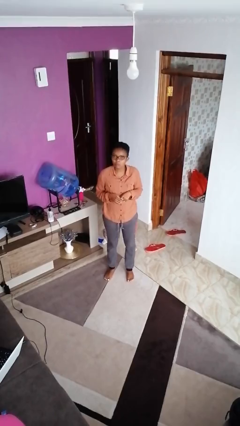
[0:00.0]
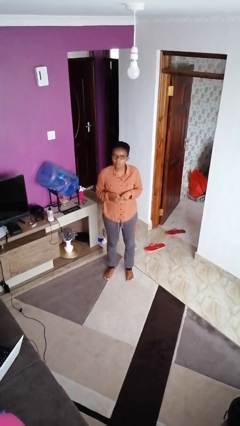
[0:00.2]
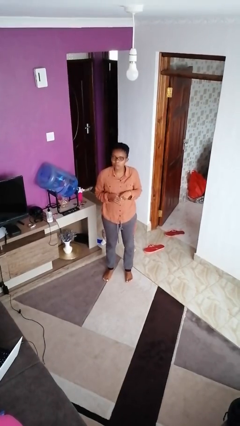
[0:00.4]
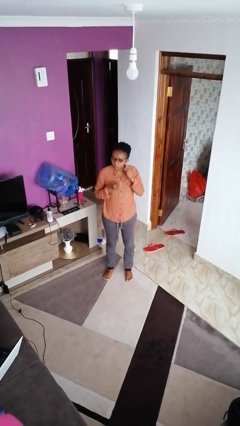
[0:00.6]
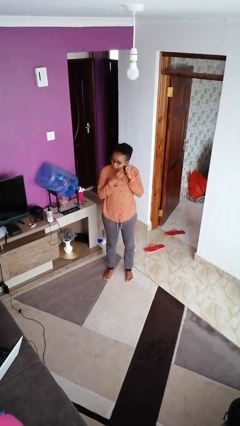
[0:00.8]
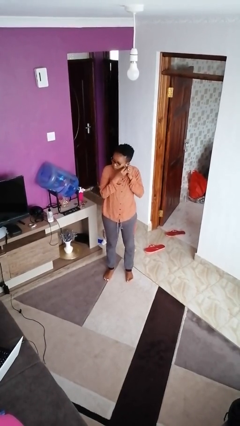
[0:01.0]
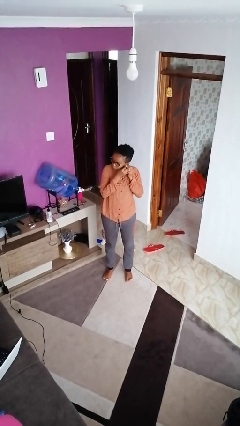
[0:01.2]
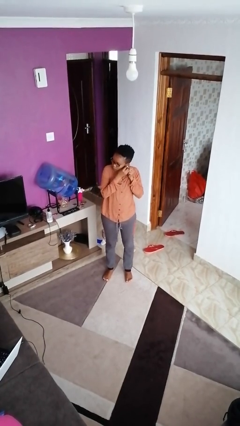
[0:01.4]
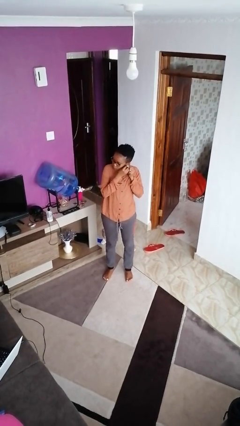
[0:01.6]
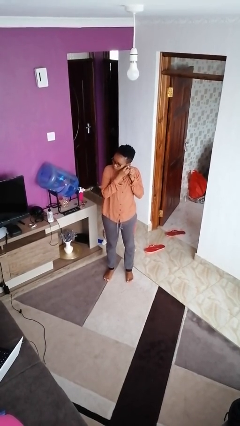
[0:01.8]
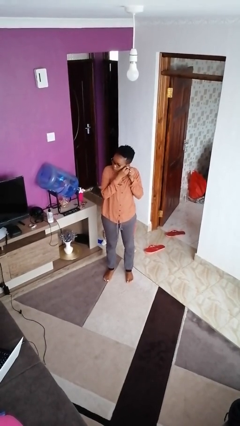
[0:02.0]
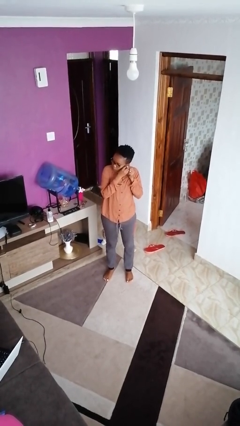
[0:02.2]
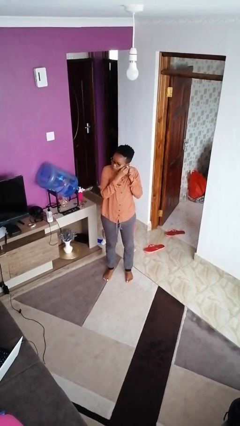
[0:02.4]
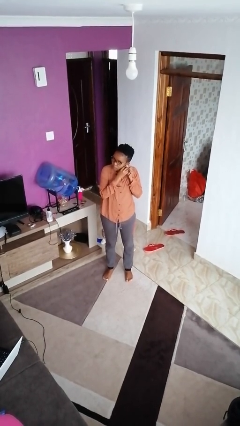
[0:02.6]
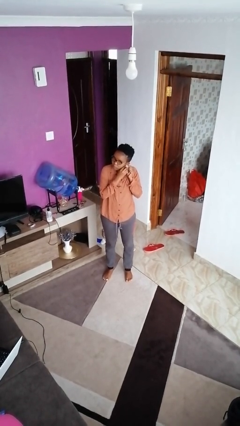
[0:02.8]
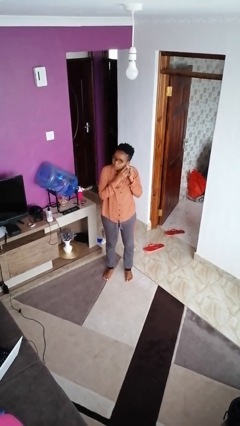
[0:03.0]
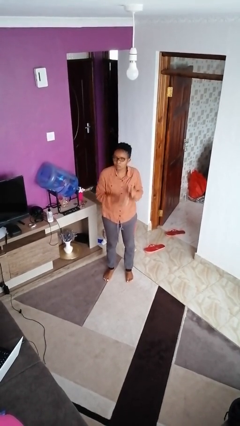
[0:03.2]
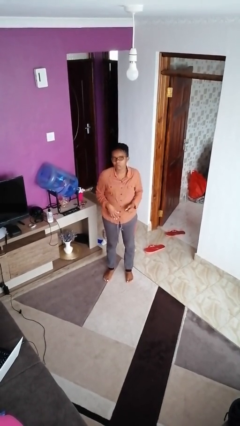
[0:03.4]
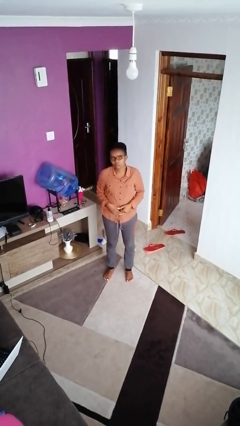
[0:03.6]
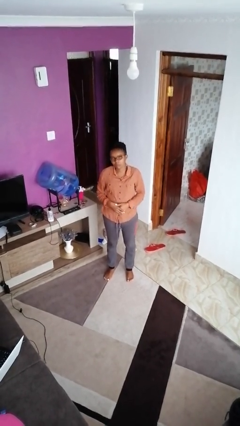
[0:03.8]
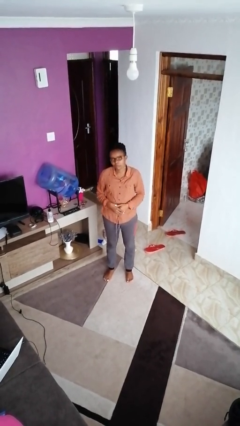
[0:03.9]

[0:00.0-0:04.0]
person puts on earrings

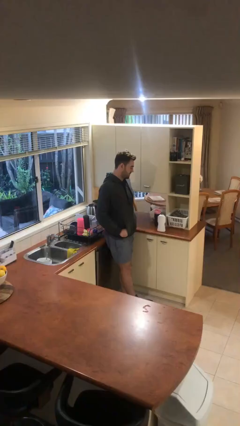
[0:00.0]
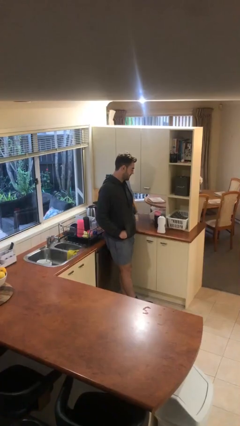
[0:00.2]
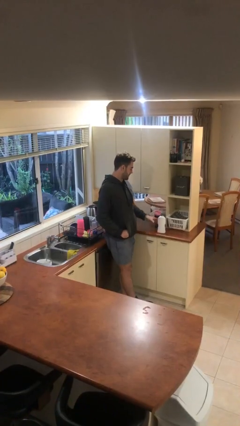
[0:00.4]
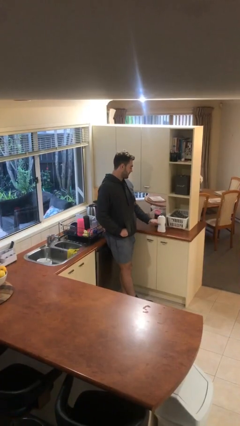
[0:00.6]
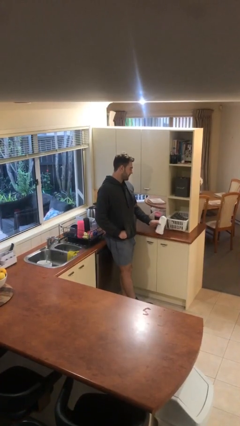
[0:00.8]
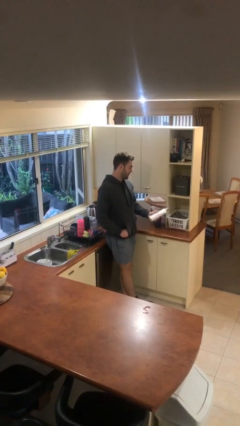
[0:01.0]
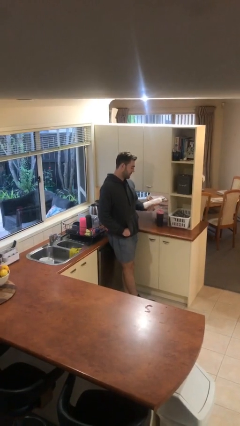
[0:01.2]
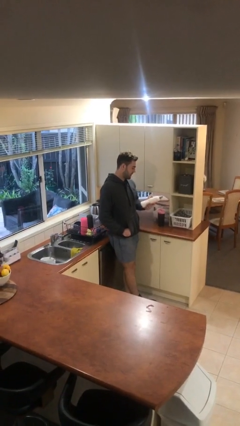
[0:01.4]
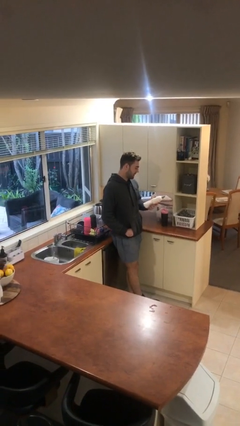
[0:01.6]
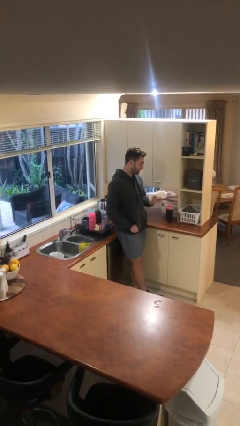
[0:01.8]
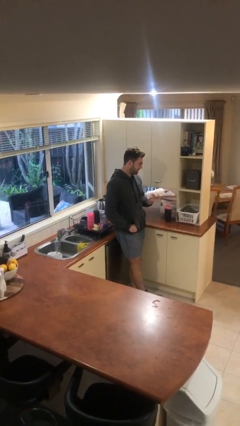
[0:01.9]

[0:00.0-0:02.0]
person picks up object from table

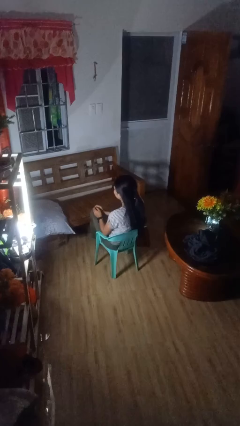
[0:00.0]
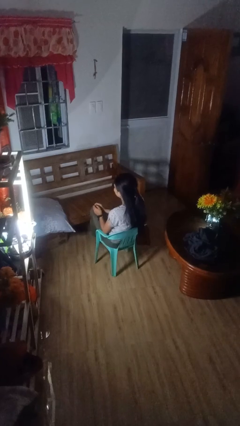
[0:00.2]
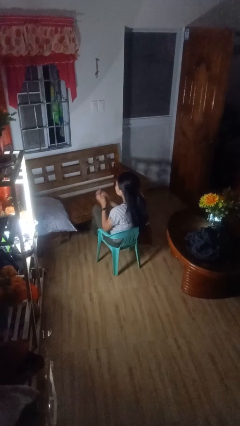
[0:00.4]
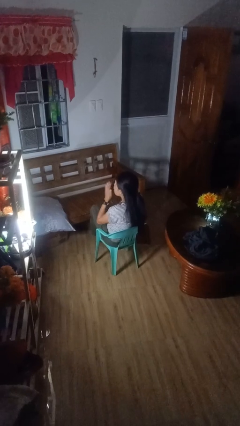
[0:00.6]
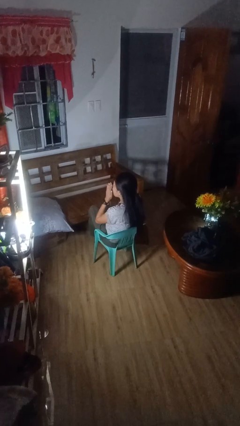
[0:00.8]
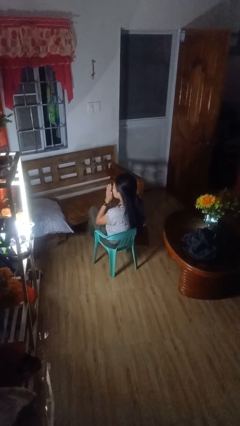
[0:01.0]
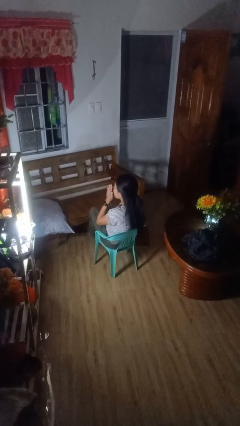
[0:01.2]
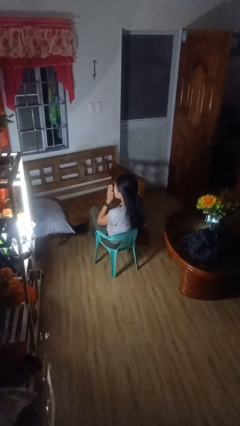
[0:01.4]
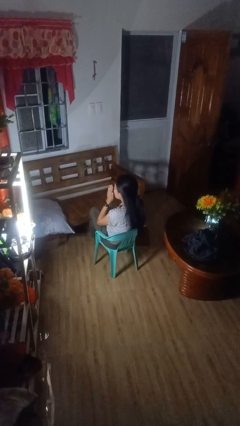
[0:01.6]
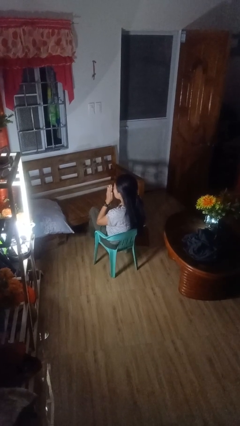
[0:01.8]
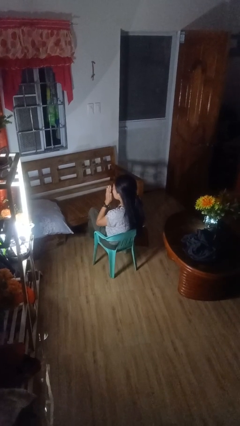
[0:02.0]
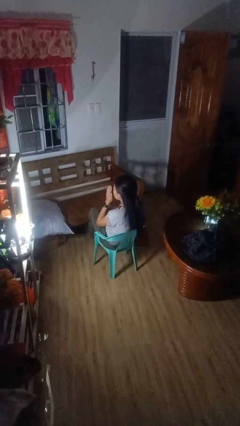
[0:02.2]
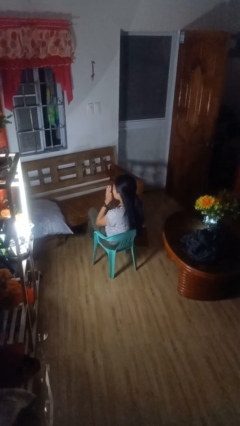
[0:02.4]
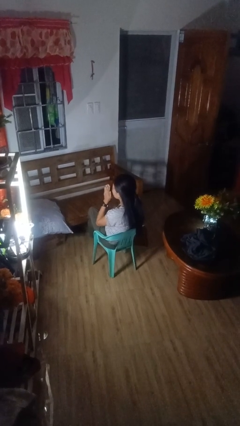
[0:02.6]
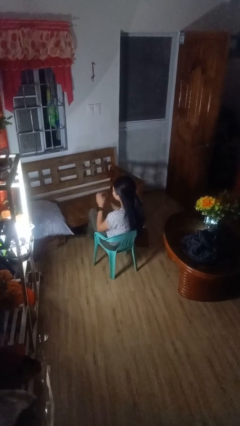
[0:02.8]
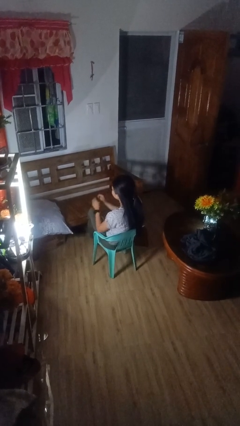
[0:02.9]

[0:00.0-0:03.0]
person blows into hands

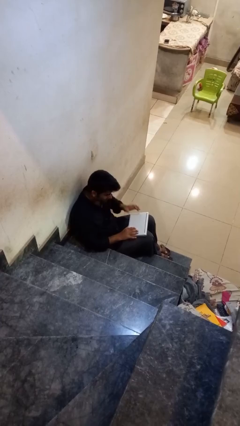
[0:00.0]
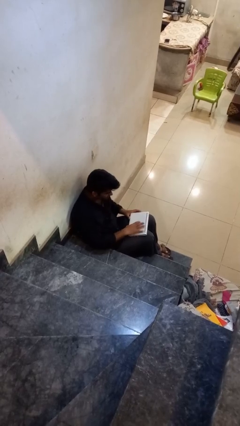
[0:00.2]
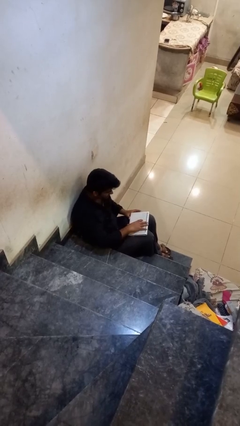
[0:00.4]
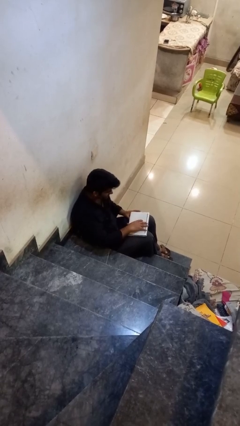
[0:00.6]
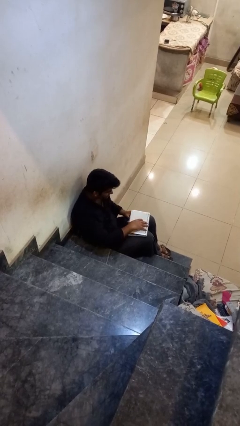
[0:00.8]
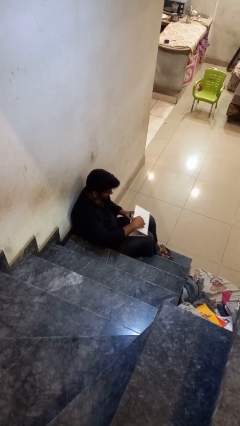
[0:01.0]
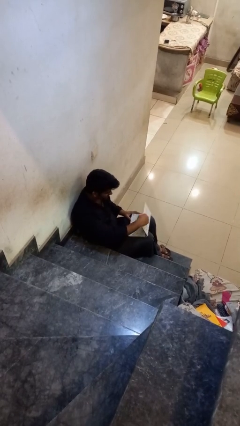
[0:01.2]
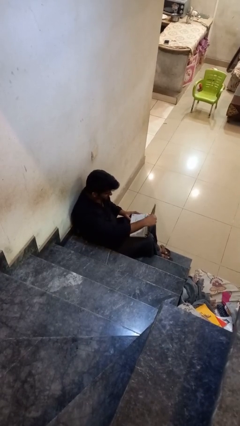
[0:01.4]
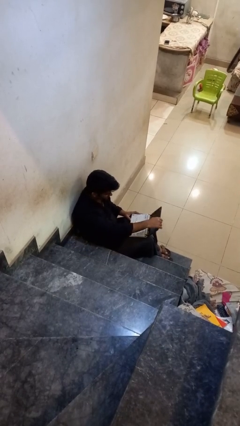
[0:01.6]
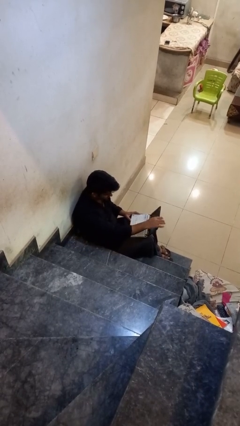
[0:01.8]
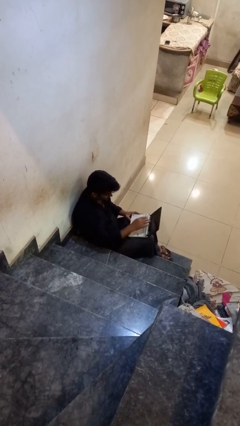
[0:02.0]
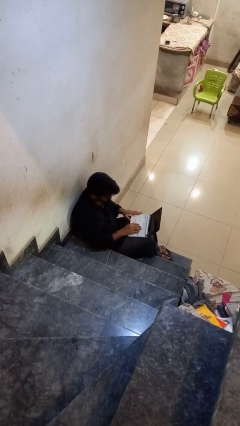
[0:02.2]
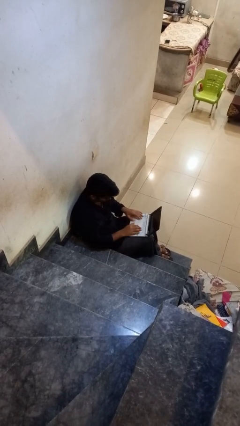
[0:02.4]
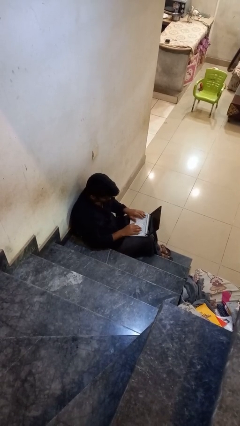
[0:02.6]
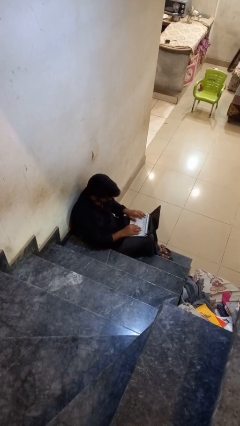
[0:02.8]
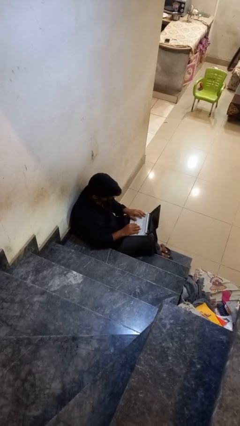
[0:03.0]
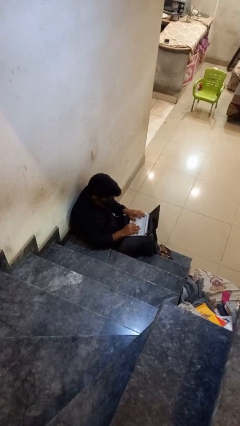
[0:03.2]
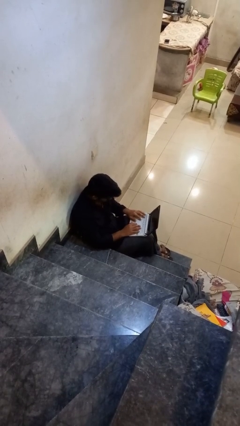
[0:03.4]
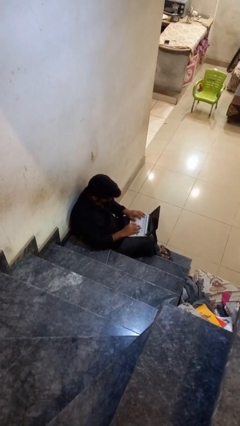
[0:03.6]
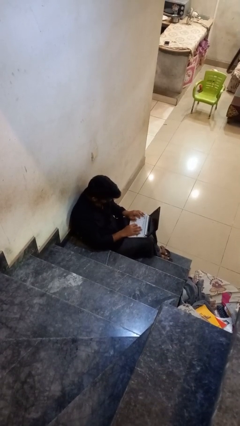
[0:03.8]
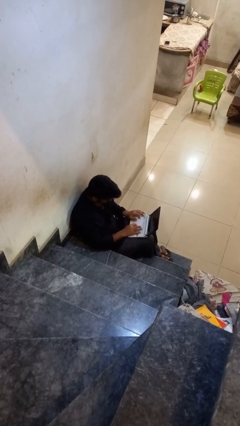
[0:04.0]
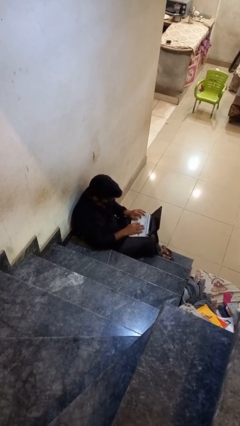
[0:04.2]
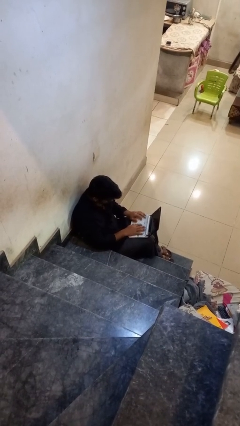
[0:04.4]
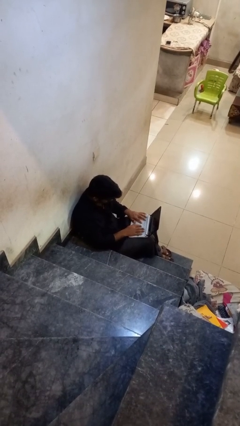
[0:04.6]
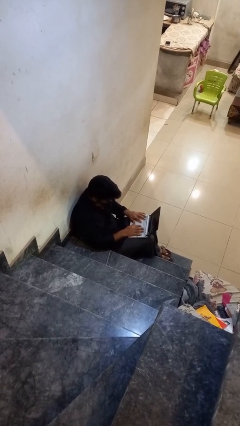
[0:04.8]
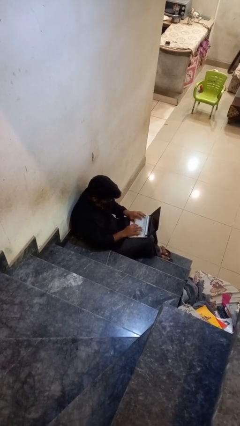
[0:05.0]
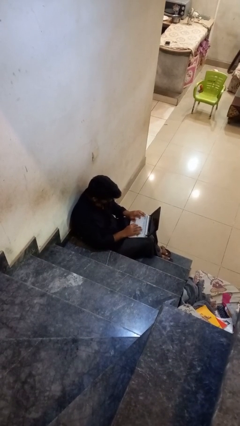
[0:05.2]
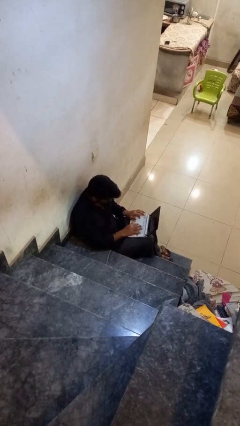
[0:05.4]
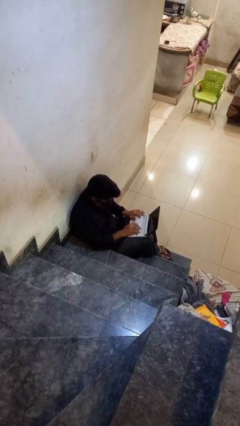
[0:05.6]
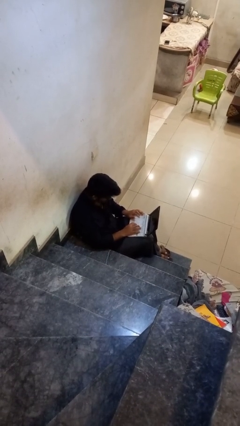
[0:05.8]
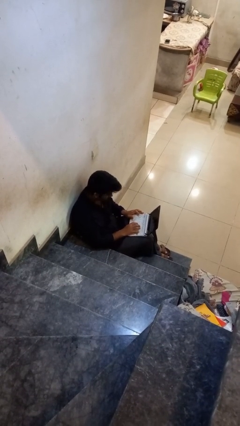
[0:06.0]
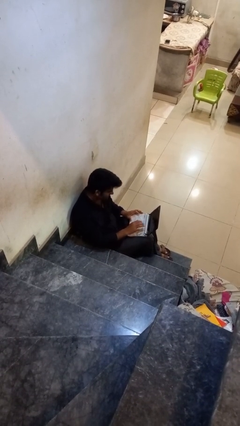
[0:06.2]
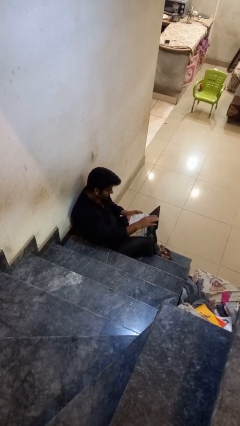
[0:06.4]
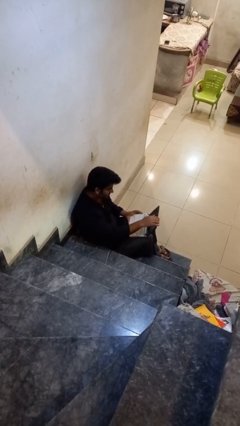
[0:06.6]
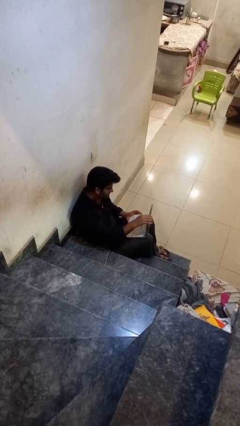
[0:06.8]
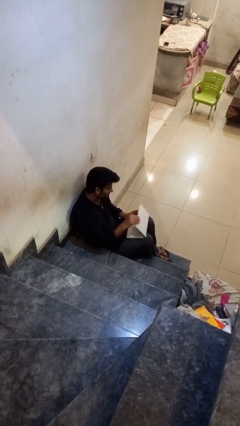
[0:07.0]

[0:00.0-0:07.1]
person interacts with laptop

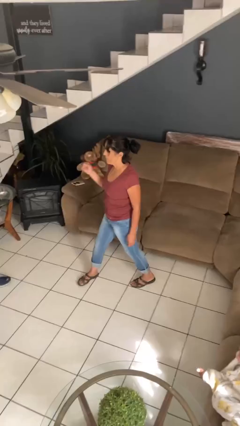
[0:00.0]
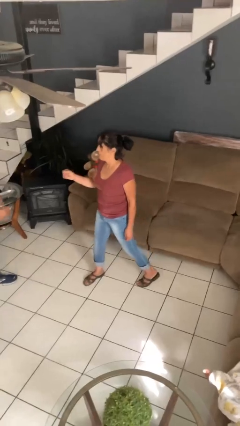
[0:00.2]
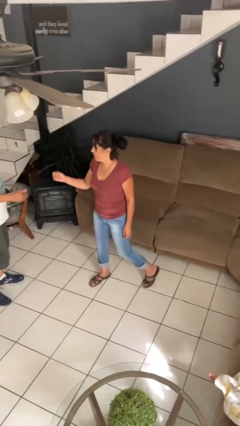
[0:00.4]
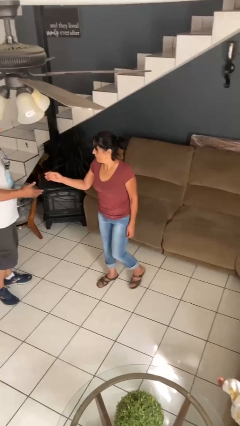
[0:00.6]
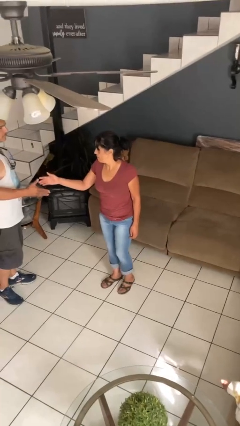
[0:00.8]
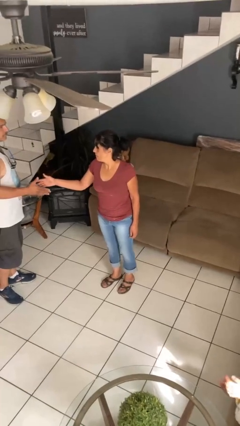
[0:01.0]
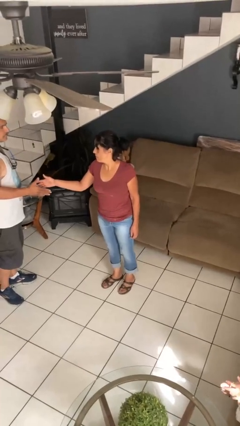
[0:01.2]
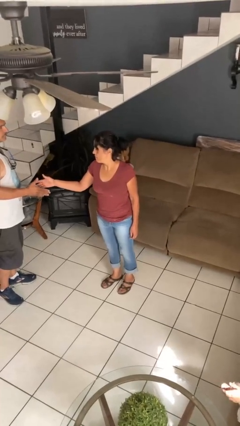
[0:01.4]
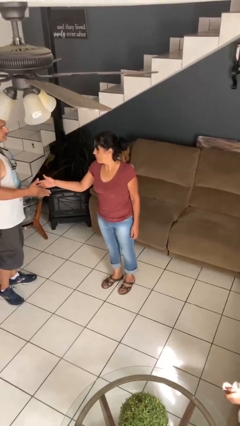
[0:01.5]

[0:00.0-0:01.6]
person waves at person

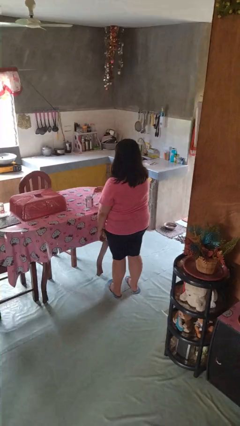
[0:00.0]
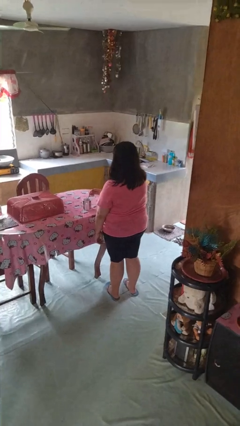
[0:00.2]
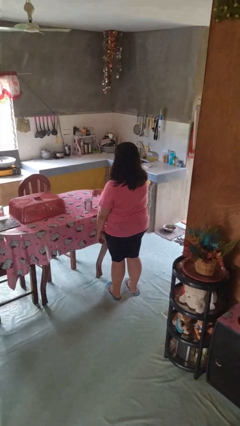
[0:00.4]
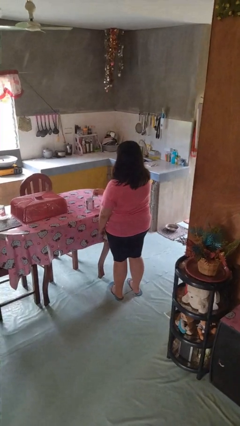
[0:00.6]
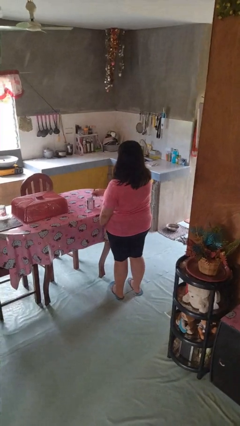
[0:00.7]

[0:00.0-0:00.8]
person stirs mug
